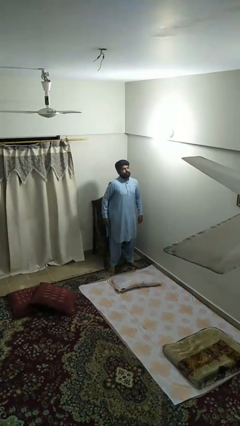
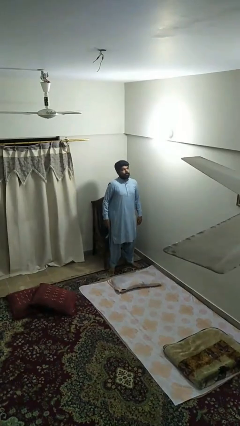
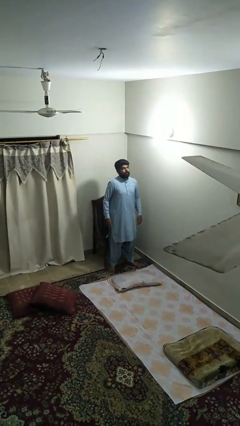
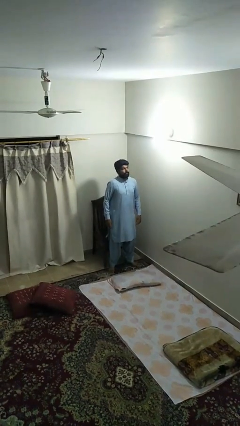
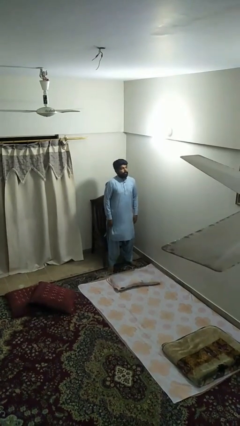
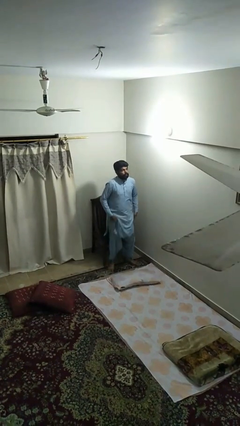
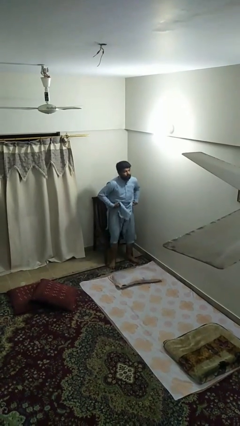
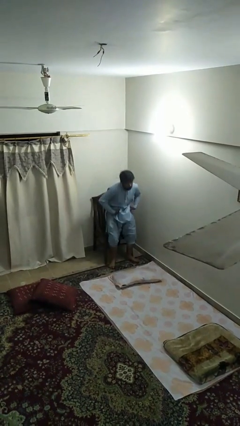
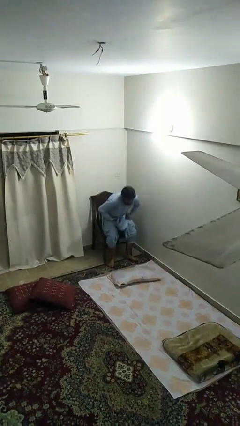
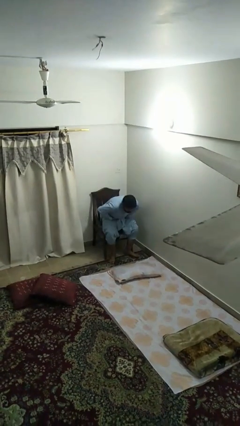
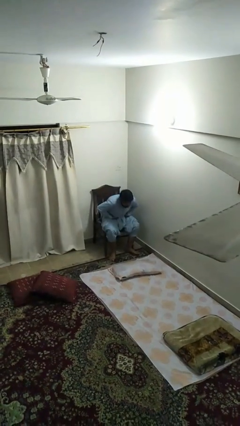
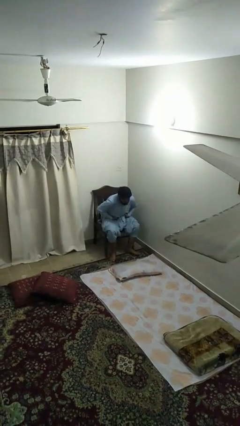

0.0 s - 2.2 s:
person sits down

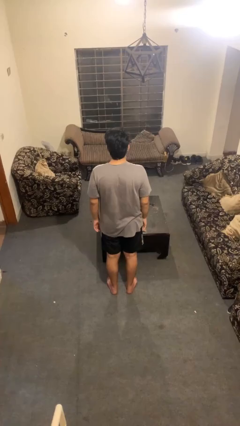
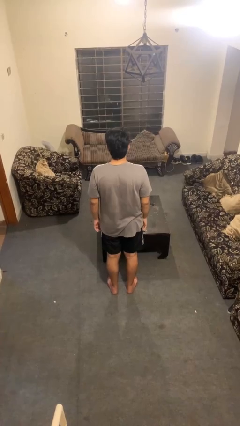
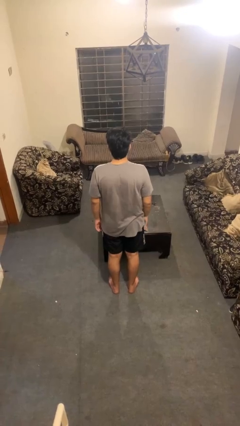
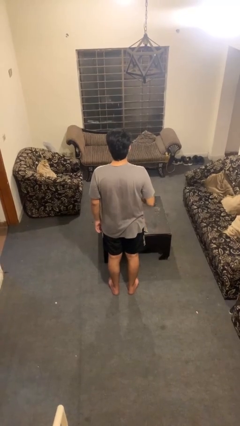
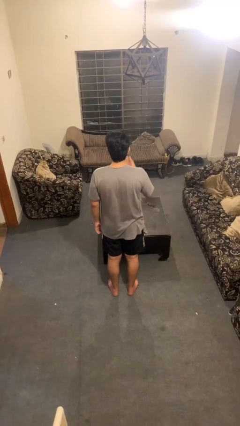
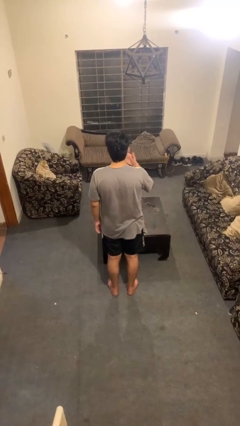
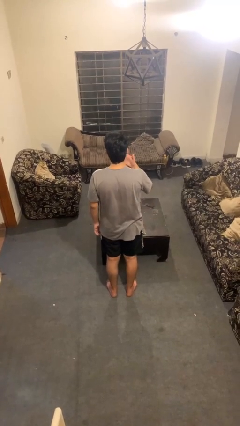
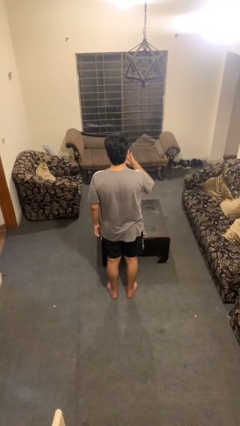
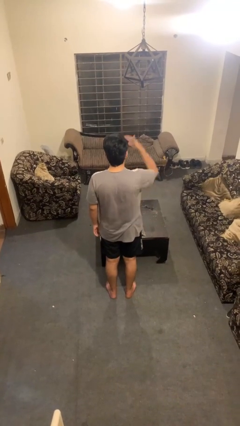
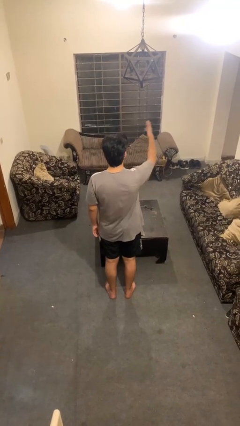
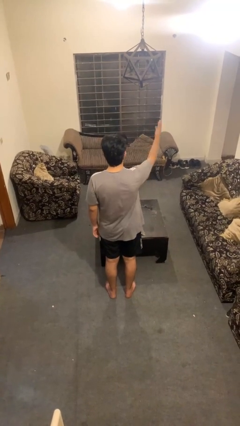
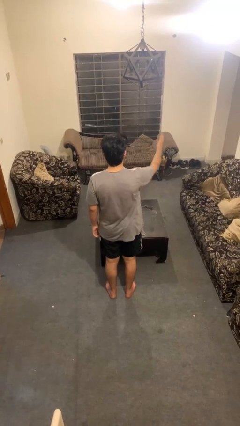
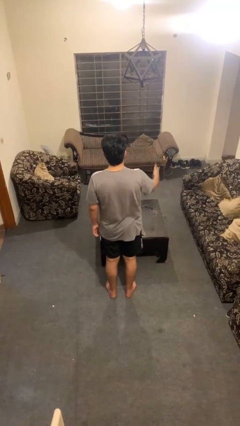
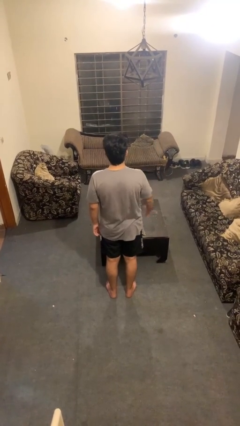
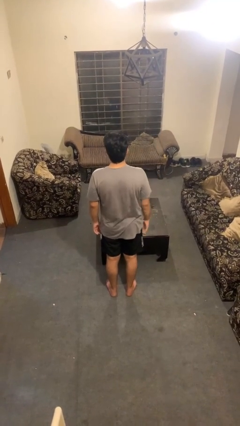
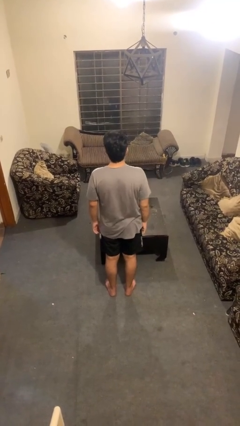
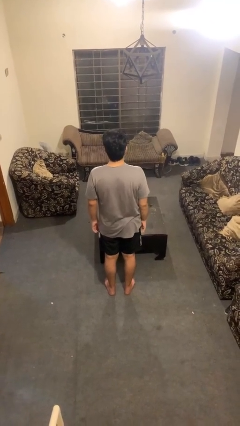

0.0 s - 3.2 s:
person gestures blow kiss

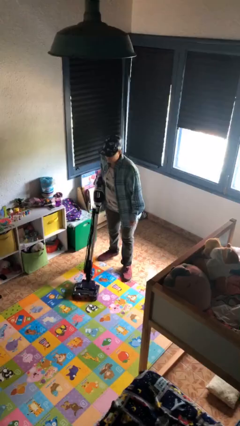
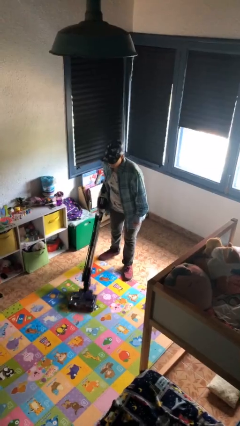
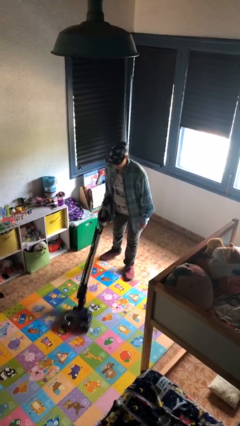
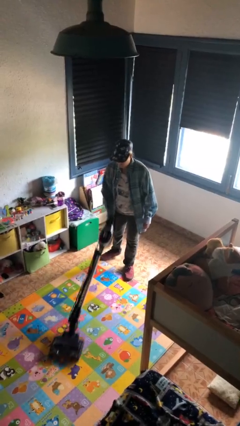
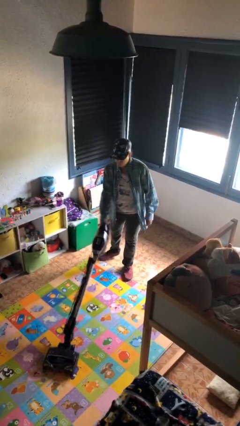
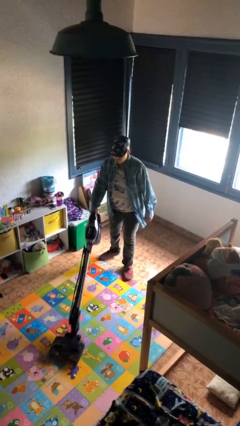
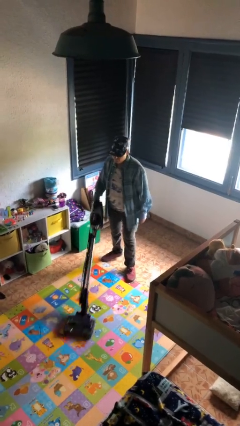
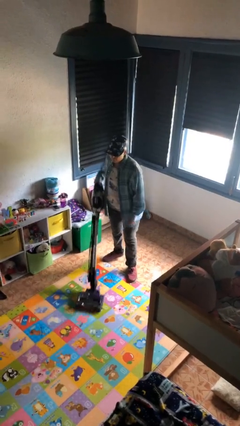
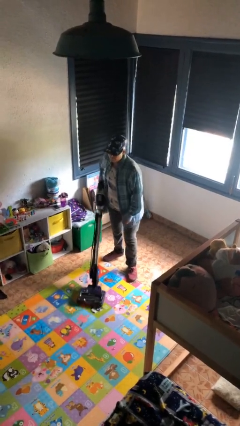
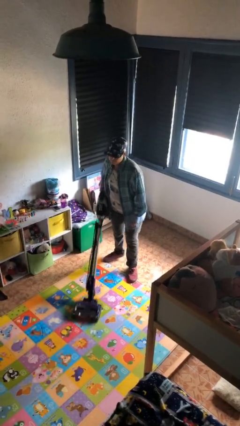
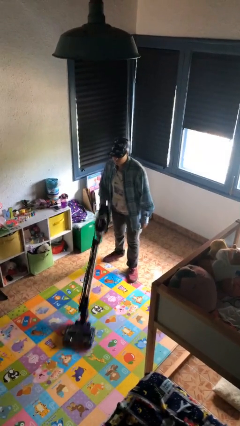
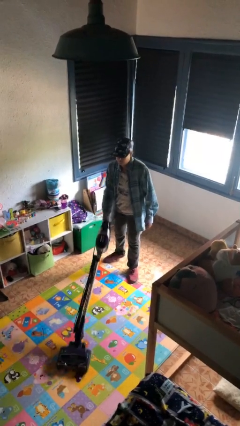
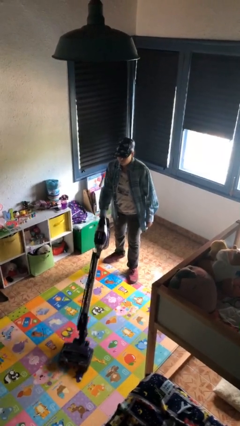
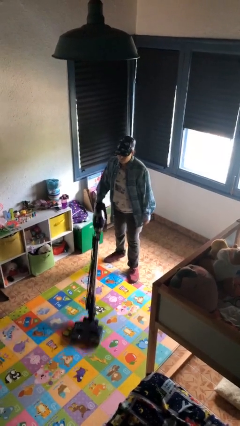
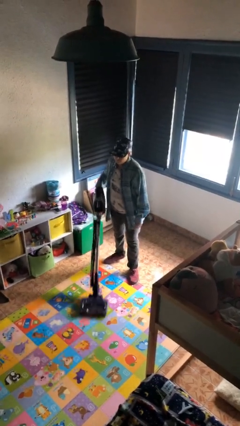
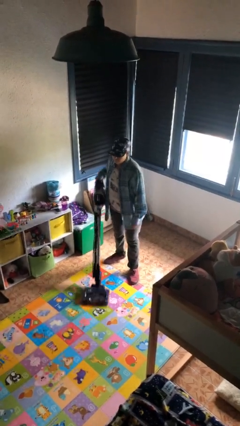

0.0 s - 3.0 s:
person vacuums carpet

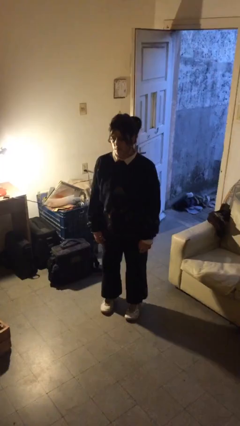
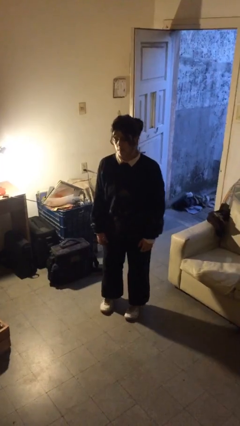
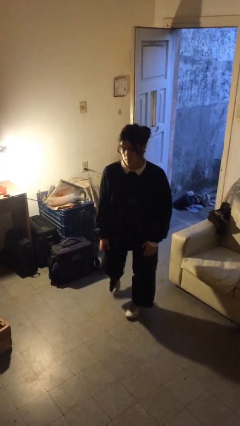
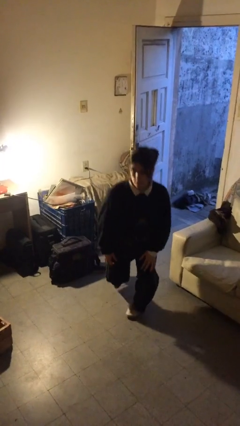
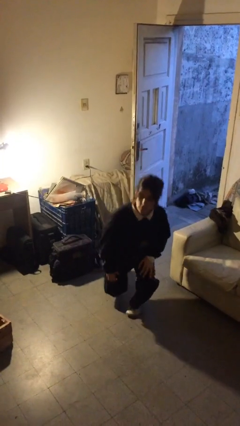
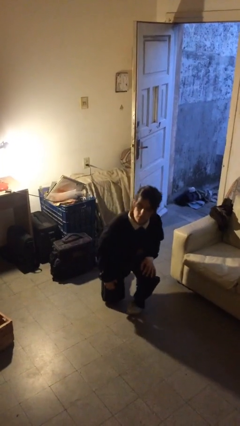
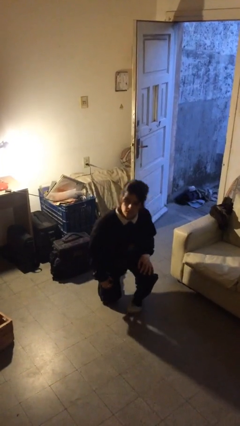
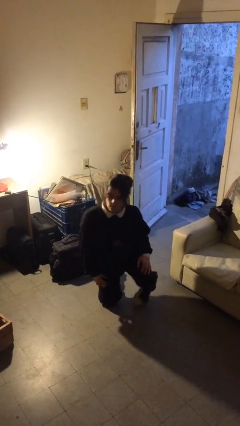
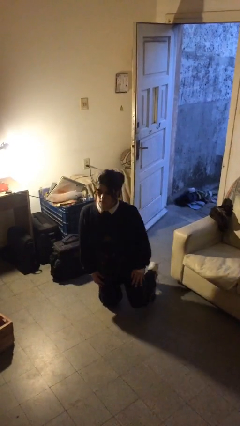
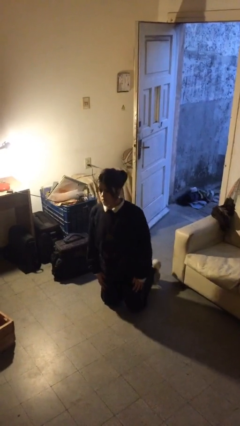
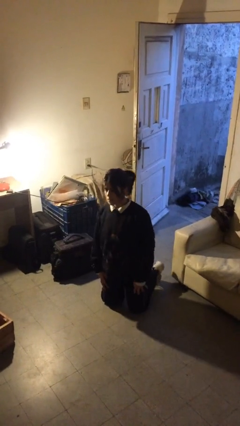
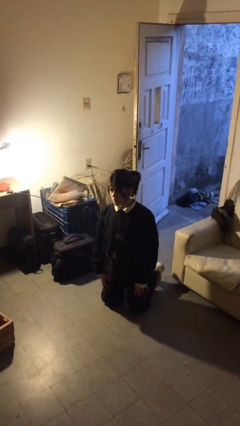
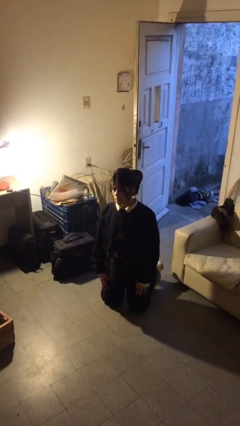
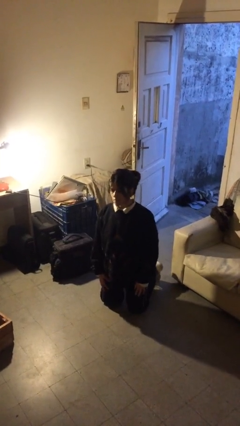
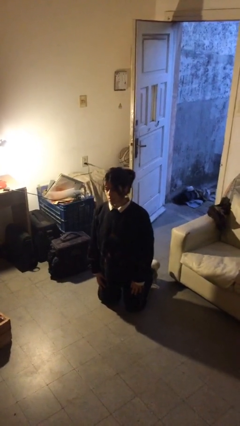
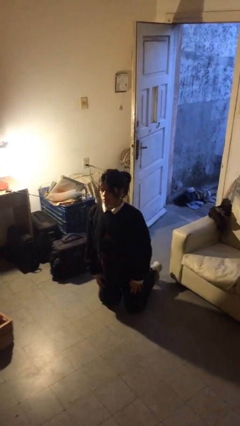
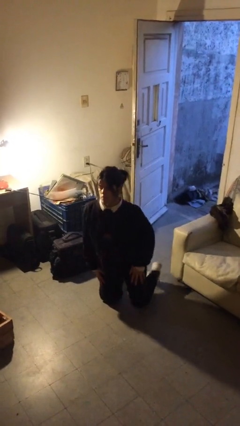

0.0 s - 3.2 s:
person kneels

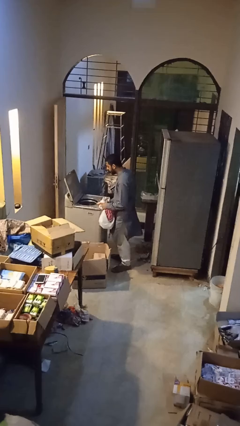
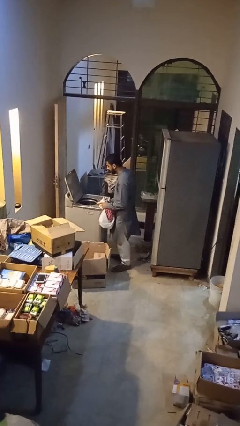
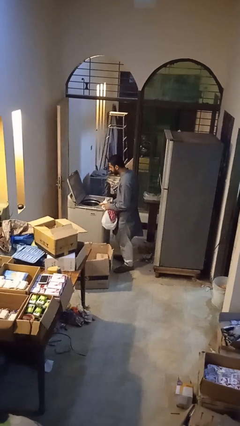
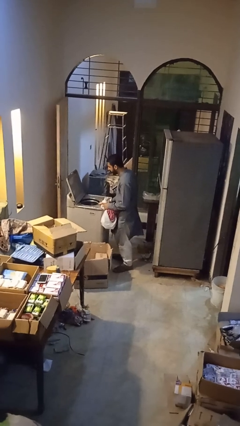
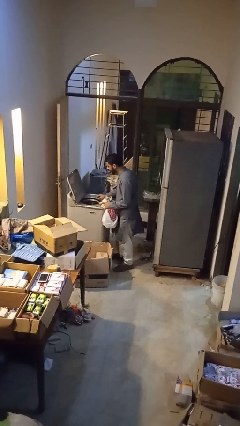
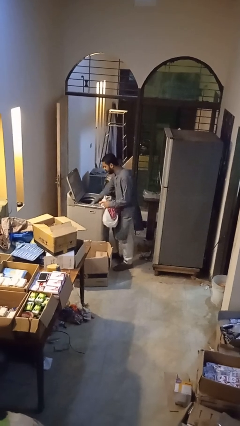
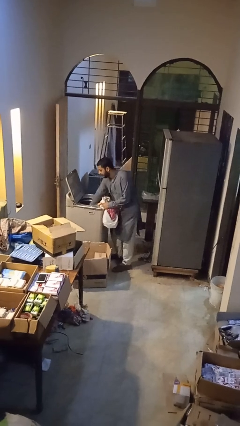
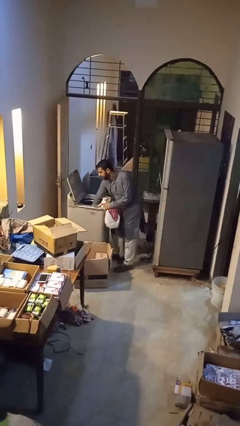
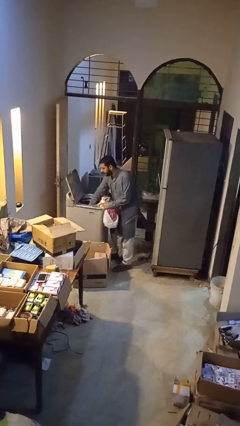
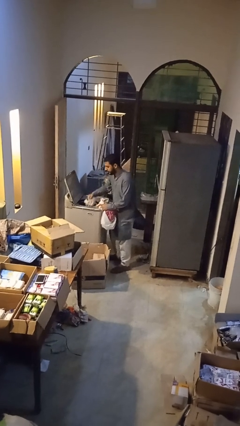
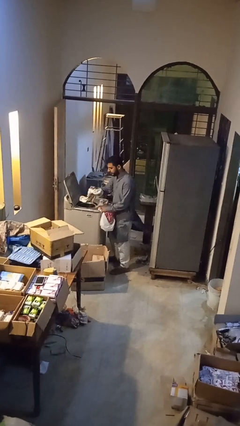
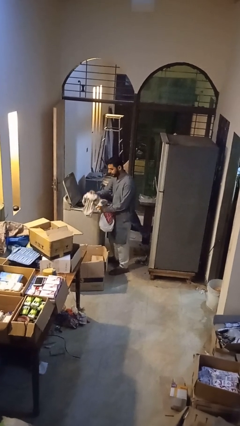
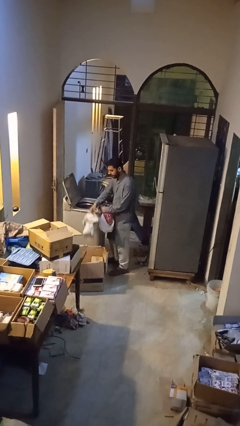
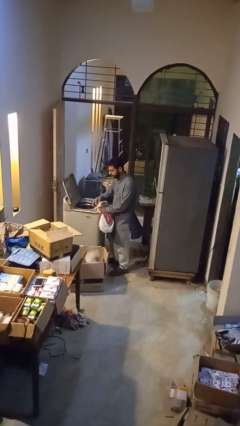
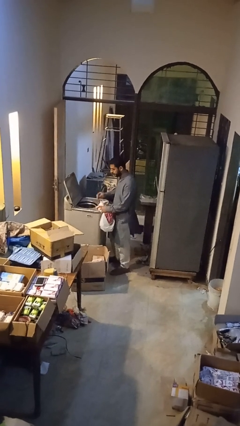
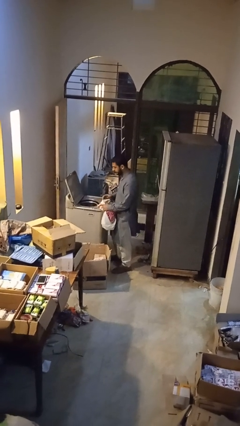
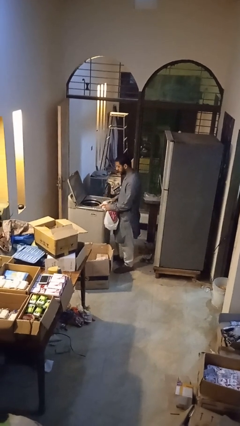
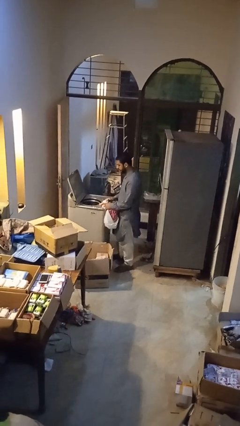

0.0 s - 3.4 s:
person unloads dryer

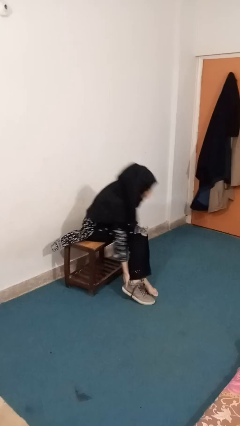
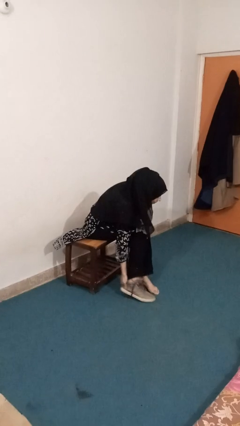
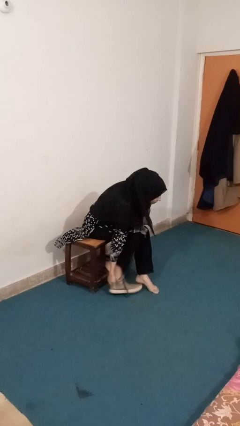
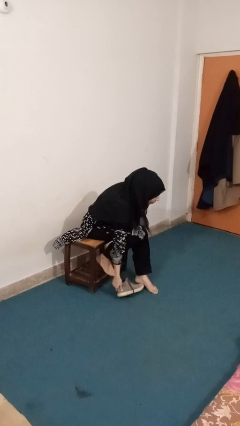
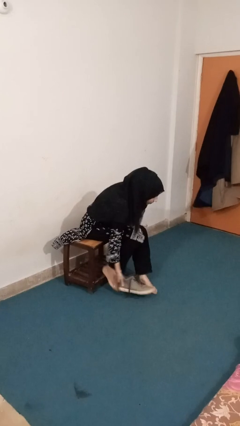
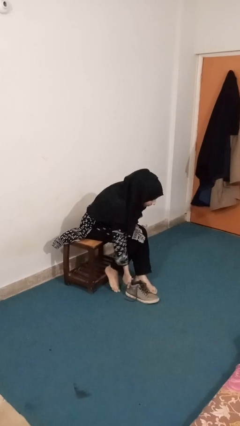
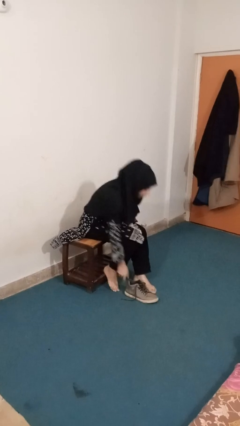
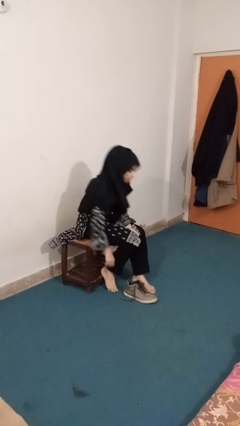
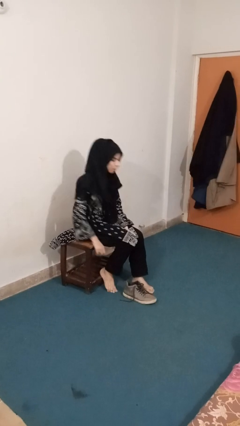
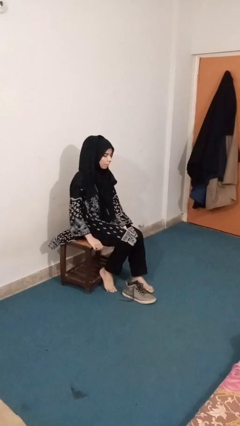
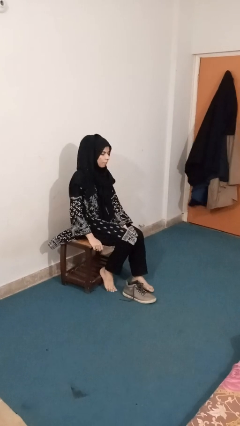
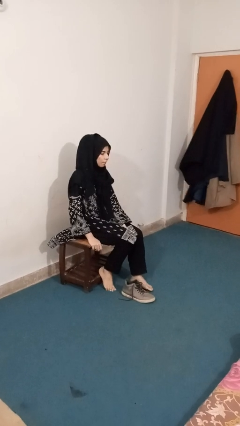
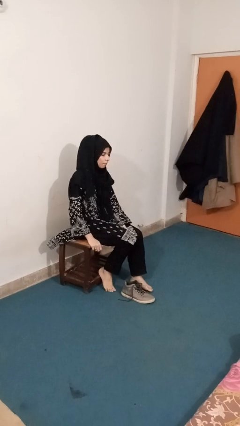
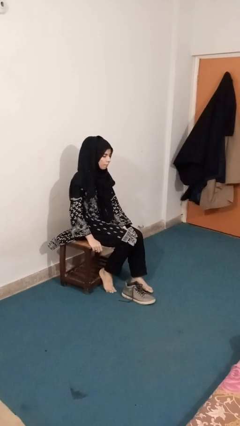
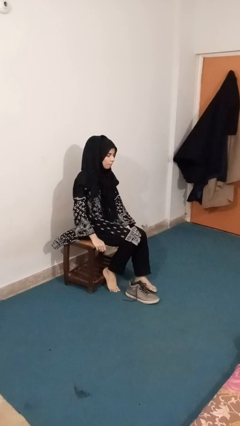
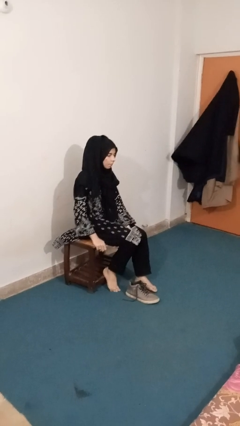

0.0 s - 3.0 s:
person takes off boots
